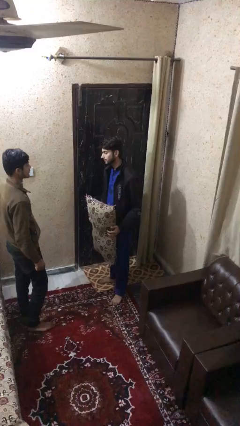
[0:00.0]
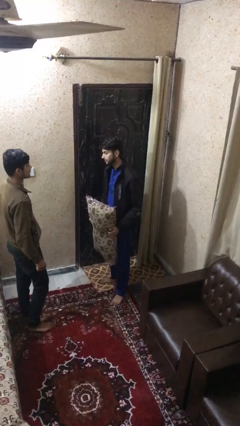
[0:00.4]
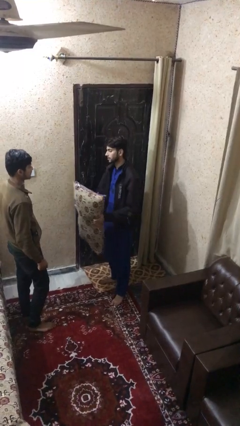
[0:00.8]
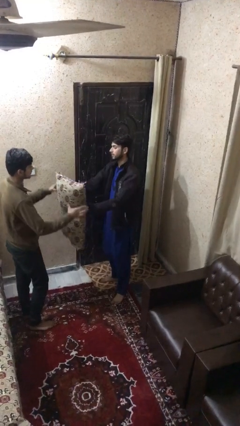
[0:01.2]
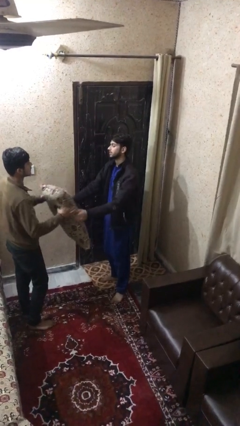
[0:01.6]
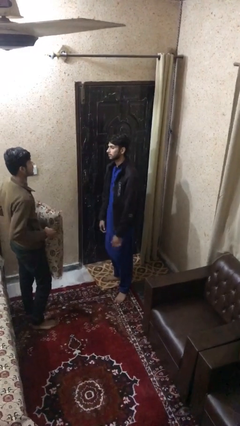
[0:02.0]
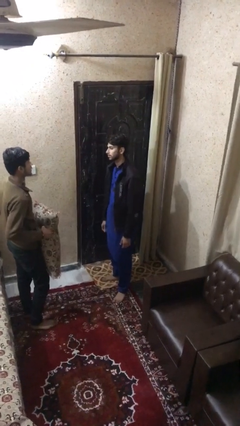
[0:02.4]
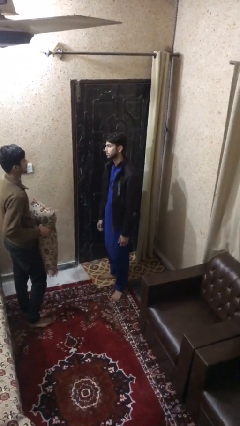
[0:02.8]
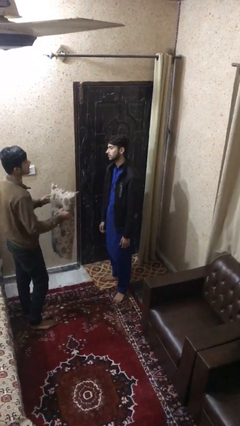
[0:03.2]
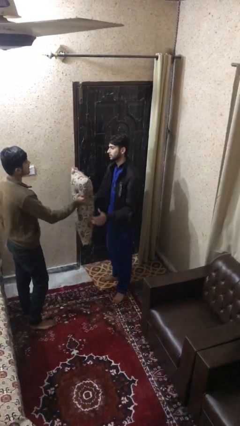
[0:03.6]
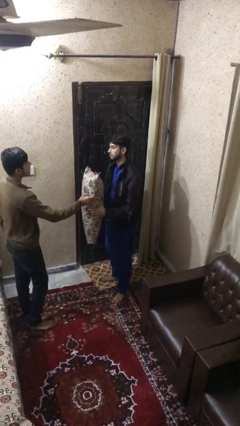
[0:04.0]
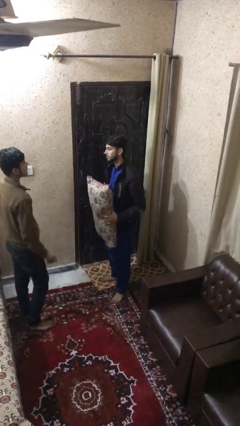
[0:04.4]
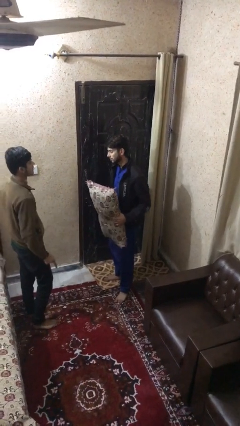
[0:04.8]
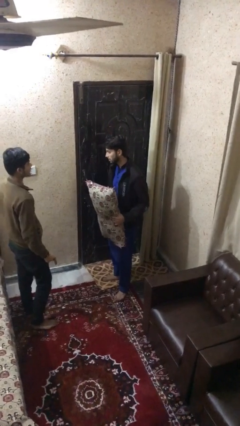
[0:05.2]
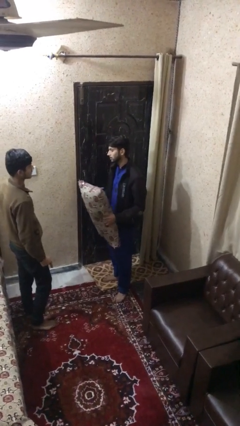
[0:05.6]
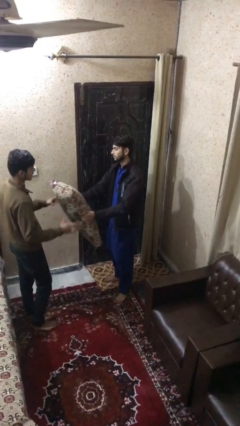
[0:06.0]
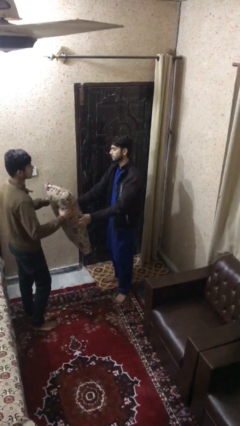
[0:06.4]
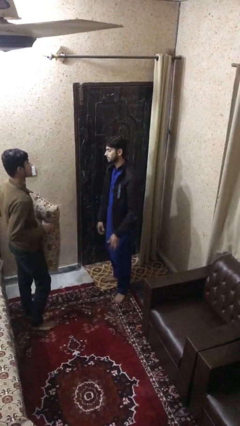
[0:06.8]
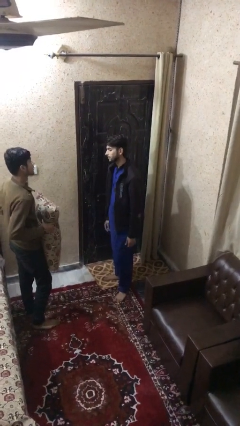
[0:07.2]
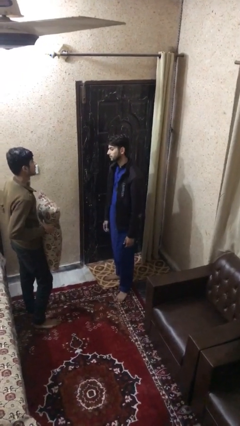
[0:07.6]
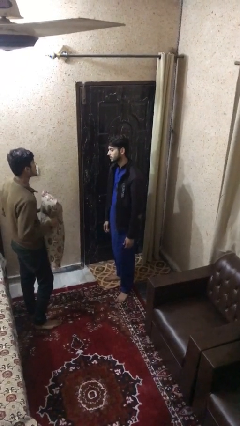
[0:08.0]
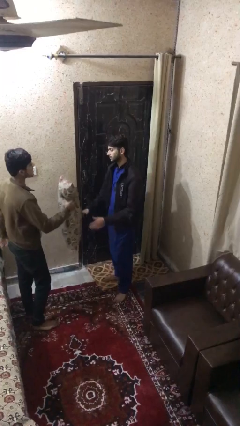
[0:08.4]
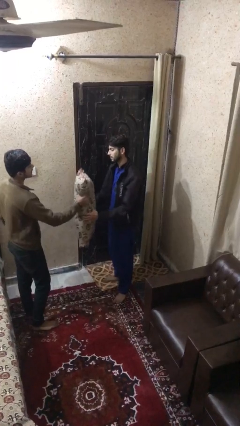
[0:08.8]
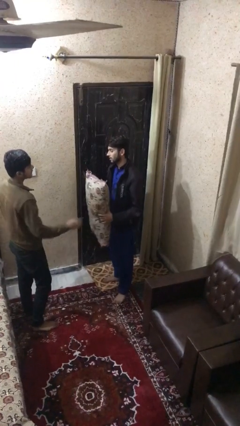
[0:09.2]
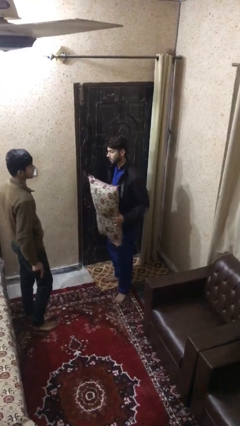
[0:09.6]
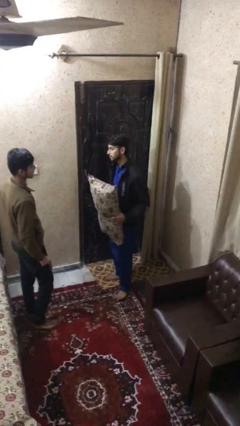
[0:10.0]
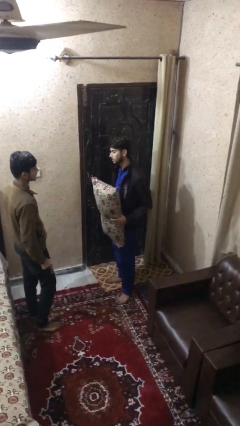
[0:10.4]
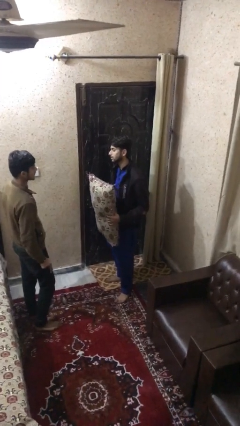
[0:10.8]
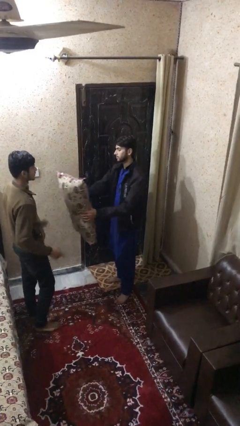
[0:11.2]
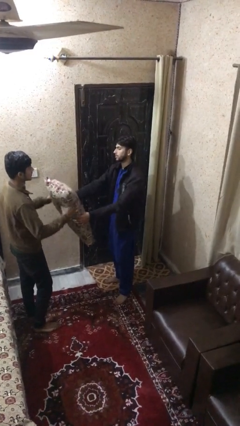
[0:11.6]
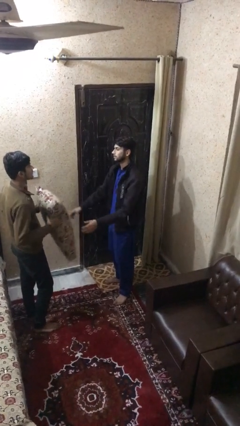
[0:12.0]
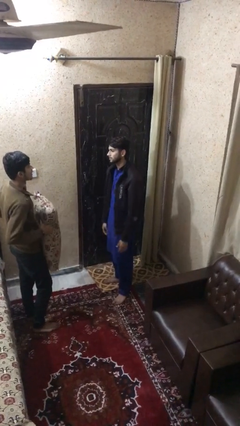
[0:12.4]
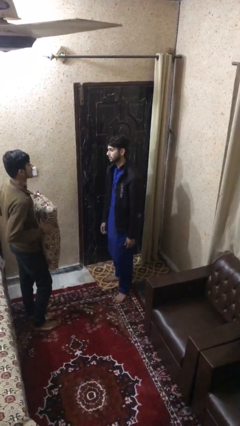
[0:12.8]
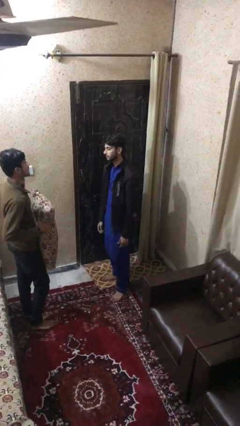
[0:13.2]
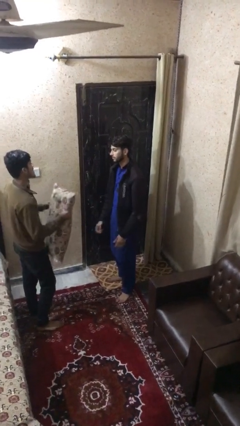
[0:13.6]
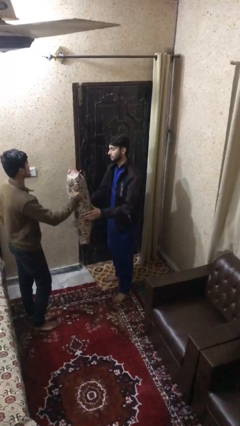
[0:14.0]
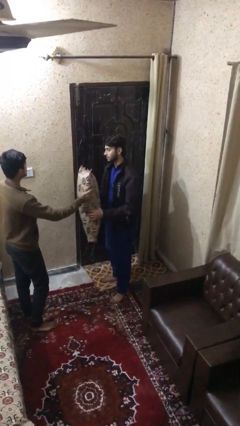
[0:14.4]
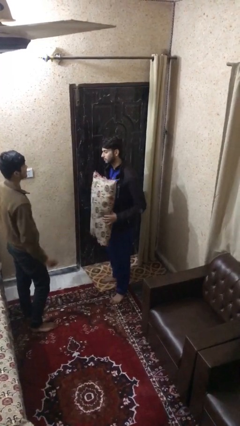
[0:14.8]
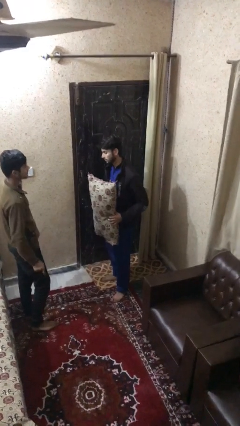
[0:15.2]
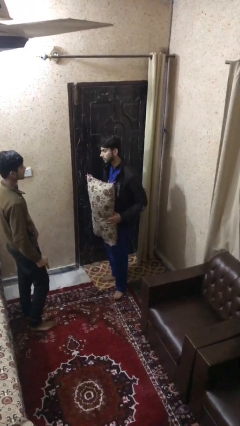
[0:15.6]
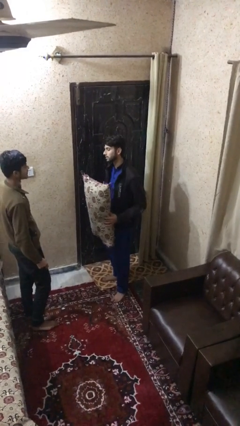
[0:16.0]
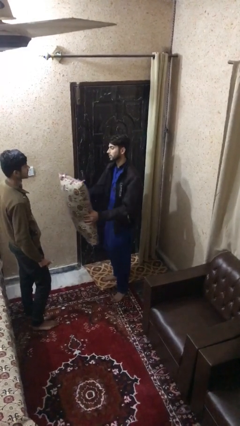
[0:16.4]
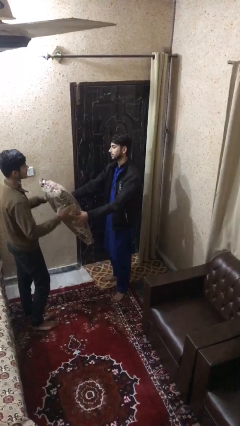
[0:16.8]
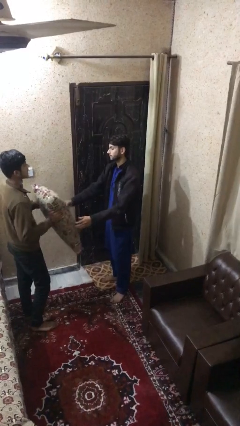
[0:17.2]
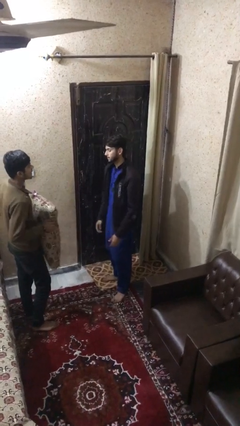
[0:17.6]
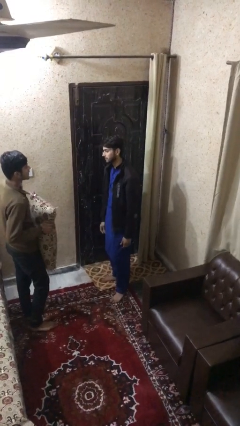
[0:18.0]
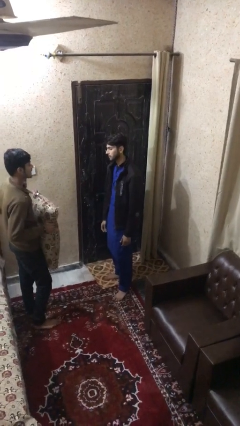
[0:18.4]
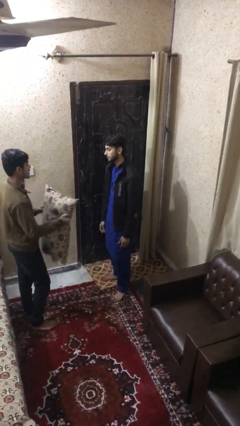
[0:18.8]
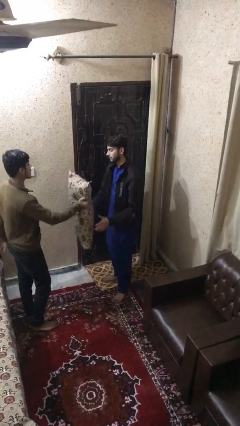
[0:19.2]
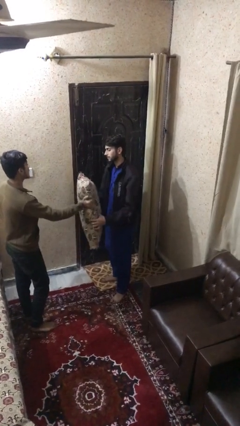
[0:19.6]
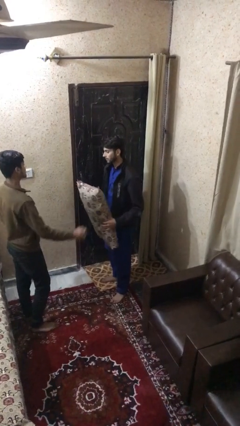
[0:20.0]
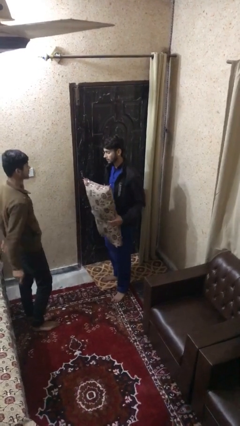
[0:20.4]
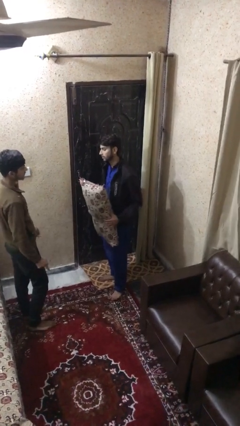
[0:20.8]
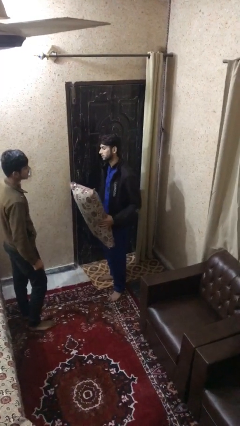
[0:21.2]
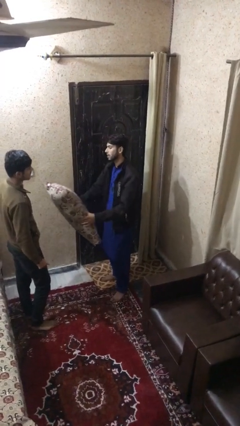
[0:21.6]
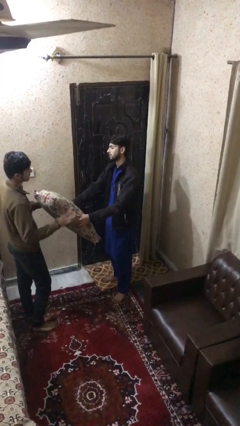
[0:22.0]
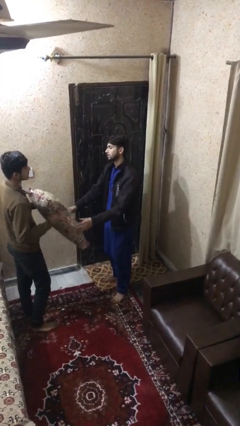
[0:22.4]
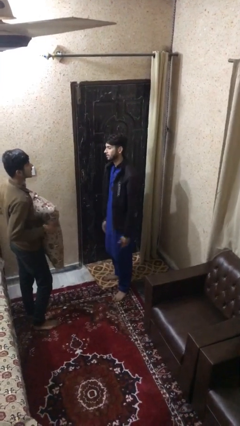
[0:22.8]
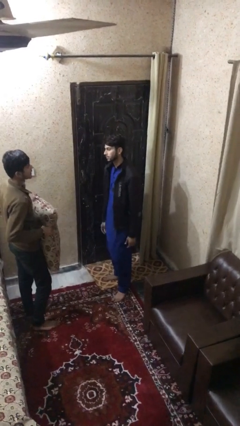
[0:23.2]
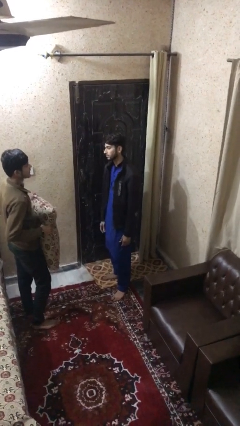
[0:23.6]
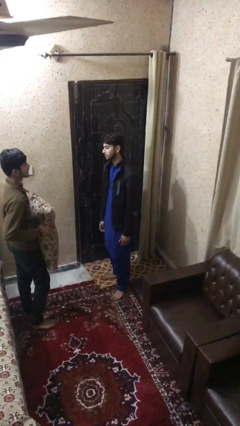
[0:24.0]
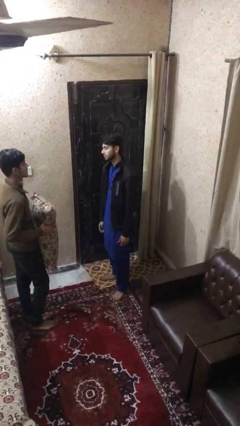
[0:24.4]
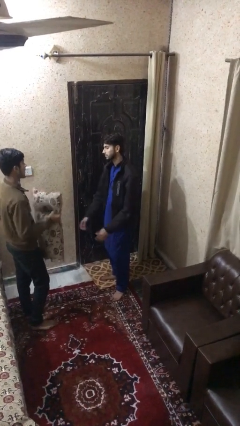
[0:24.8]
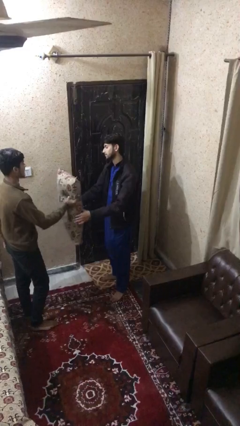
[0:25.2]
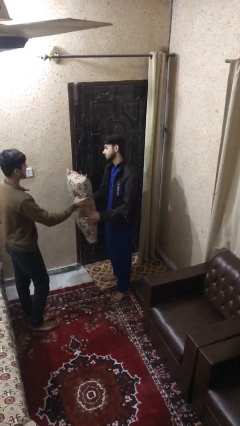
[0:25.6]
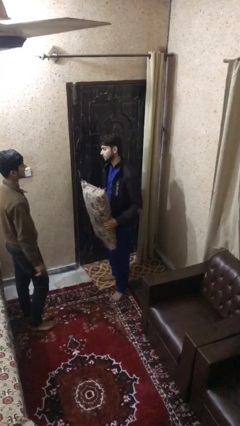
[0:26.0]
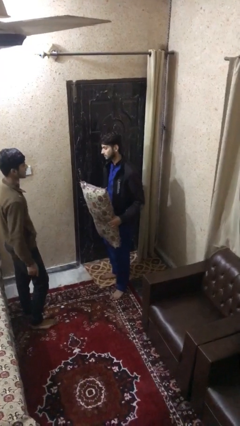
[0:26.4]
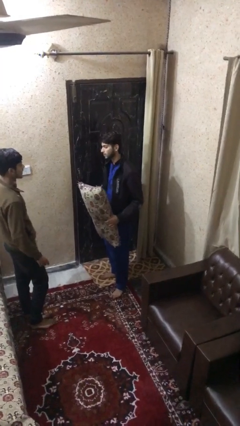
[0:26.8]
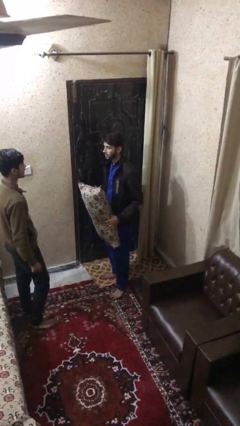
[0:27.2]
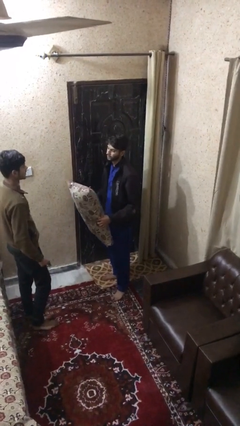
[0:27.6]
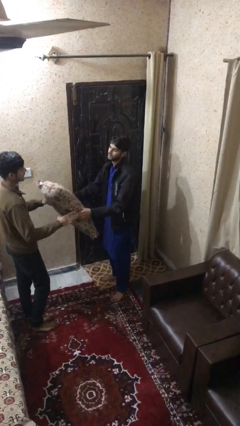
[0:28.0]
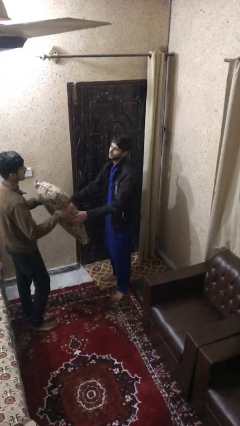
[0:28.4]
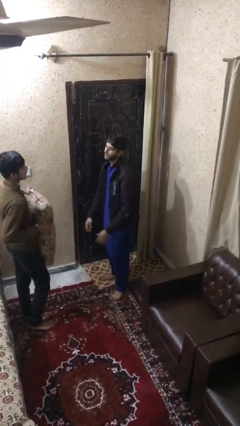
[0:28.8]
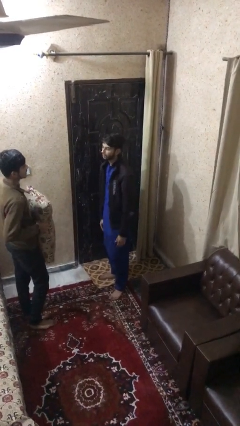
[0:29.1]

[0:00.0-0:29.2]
person transfers object to person

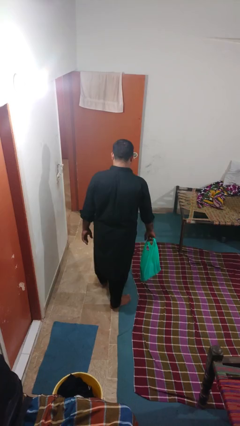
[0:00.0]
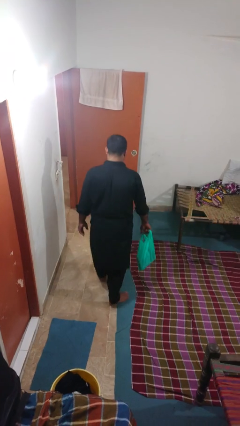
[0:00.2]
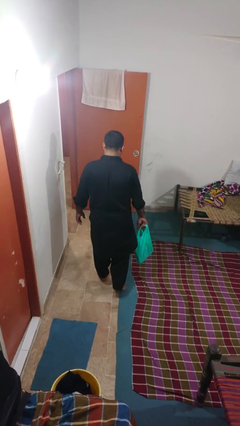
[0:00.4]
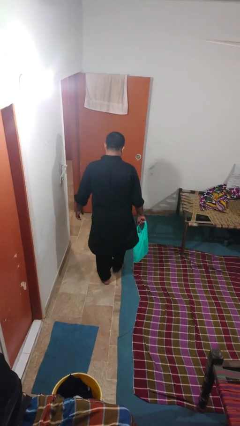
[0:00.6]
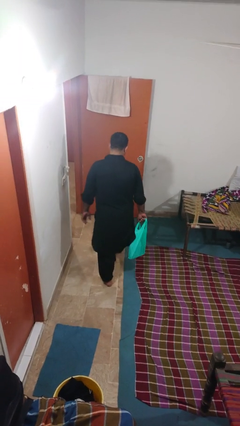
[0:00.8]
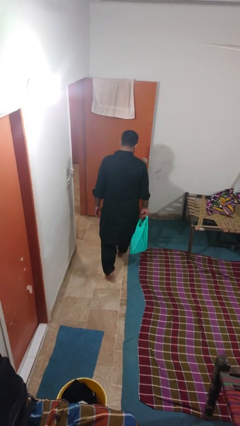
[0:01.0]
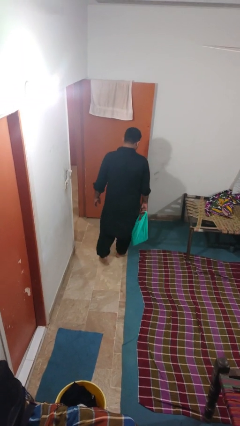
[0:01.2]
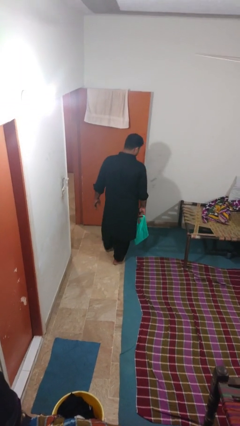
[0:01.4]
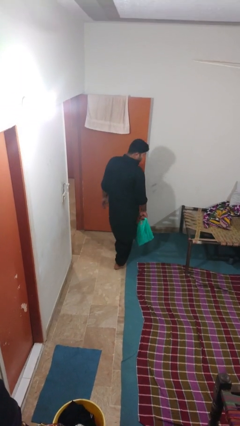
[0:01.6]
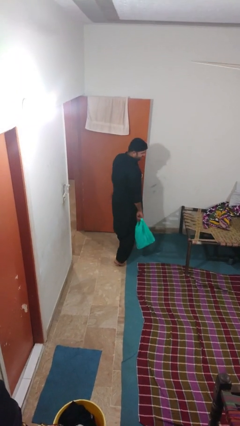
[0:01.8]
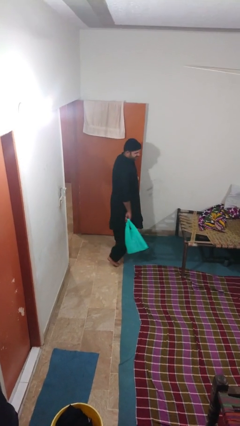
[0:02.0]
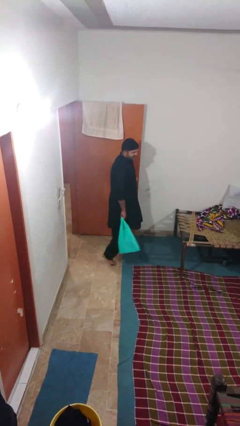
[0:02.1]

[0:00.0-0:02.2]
person carries groceries

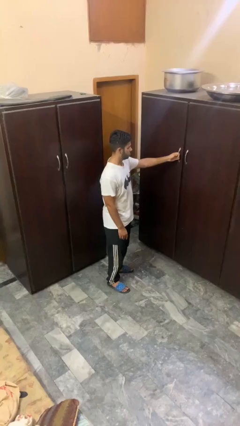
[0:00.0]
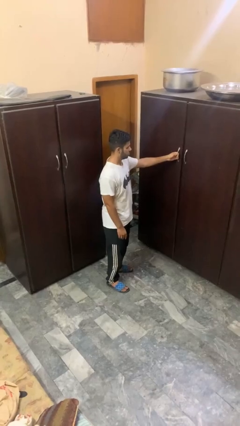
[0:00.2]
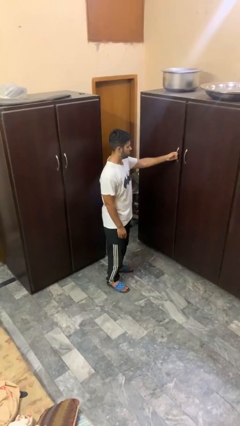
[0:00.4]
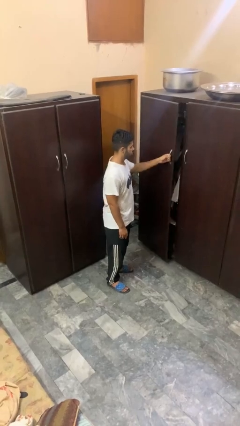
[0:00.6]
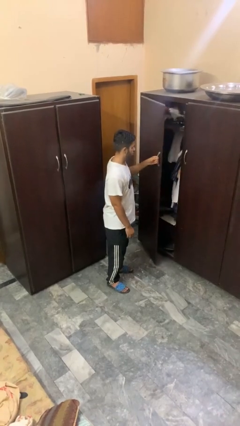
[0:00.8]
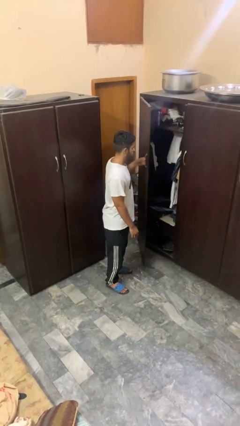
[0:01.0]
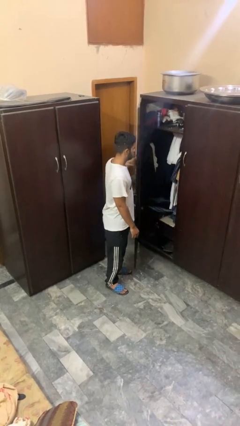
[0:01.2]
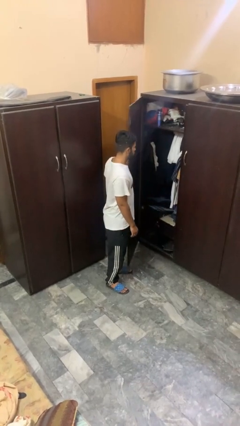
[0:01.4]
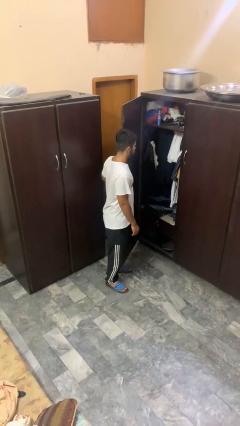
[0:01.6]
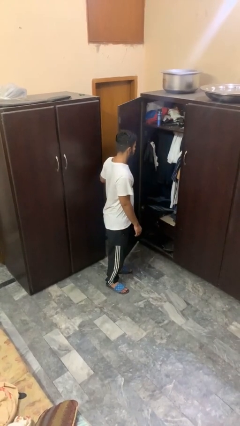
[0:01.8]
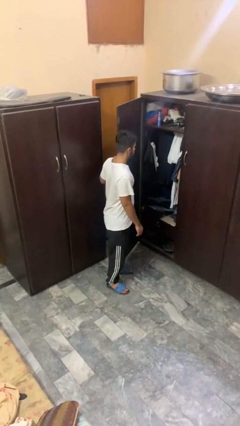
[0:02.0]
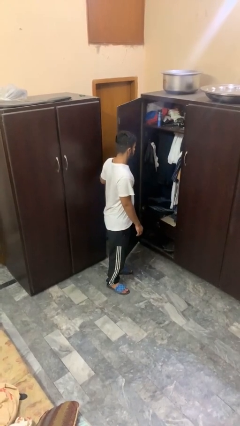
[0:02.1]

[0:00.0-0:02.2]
person opens closet door
